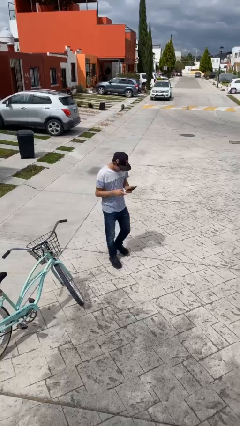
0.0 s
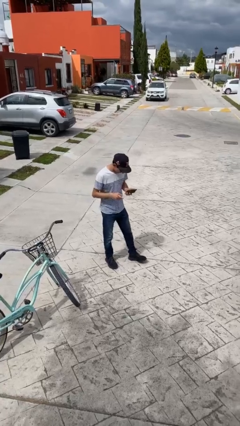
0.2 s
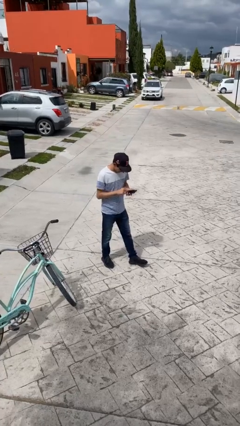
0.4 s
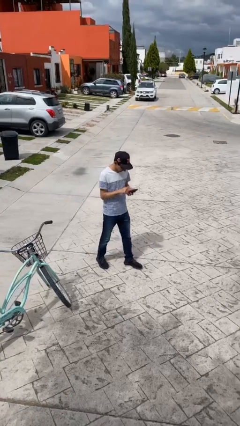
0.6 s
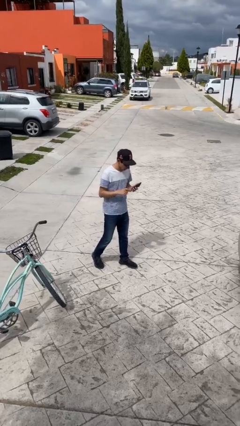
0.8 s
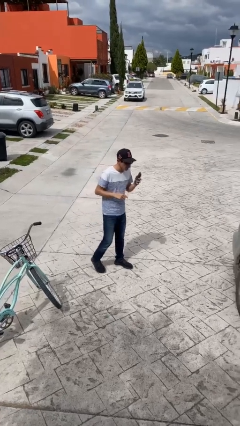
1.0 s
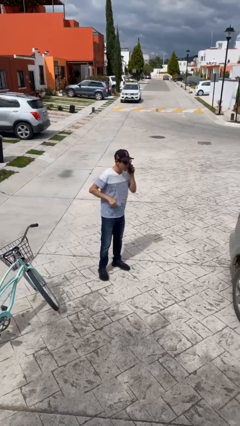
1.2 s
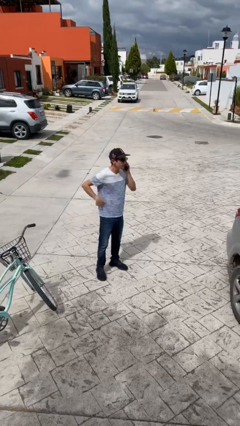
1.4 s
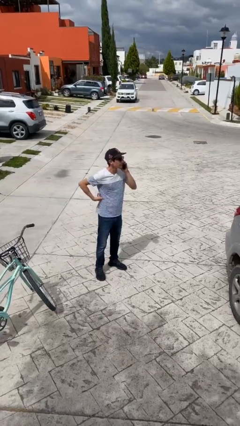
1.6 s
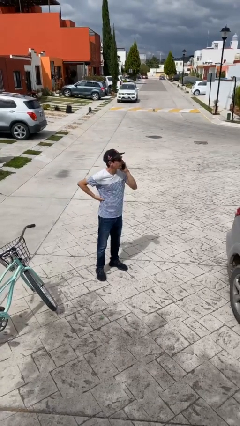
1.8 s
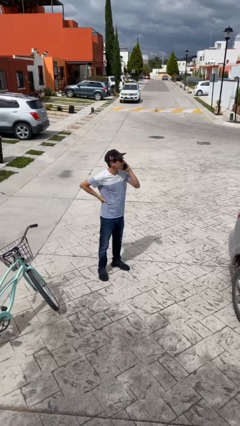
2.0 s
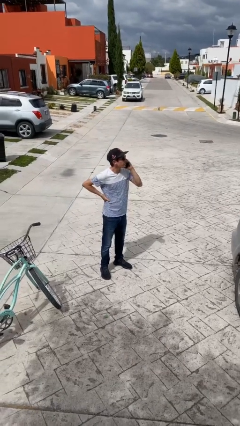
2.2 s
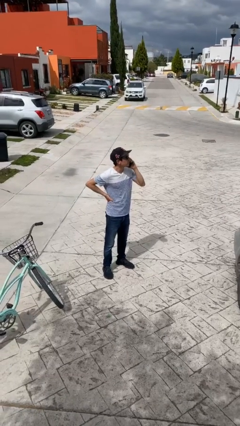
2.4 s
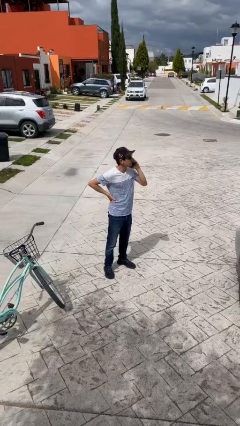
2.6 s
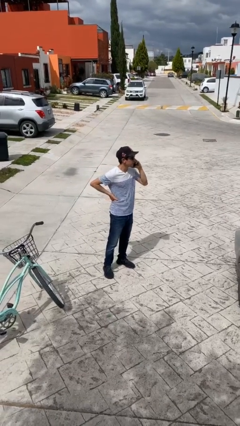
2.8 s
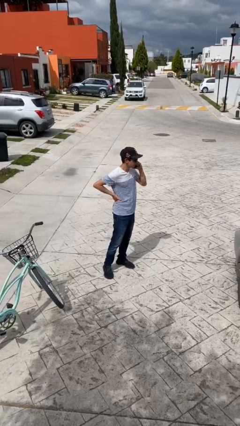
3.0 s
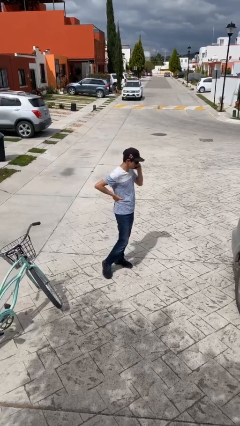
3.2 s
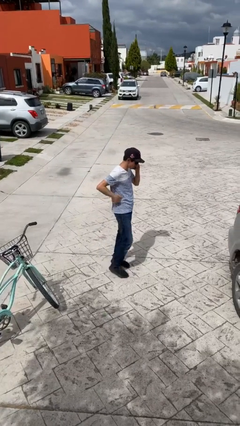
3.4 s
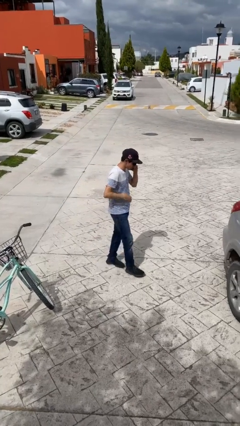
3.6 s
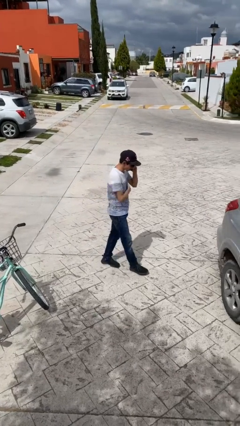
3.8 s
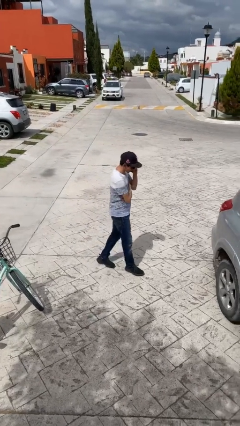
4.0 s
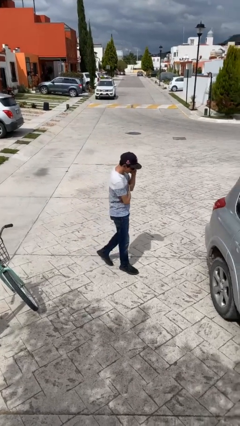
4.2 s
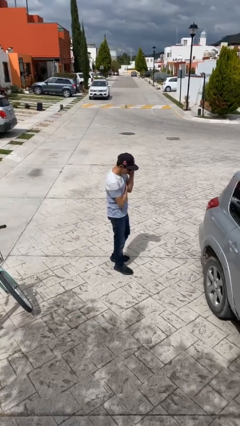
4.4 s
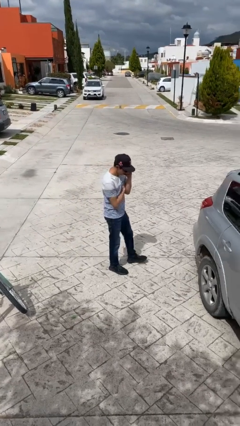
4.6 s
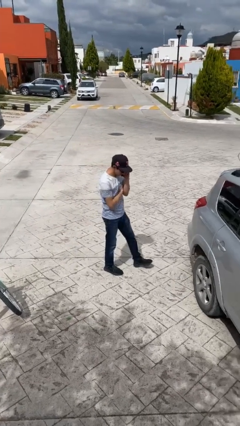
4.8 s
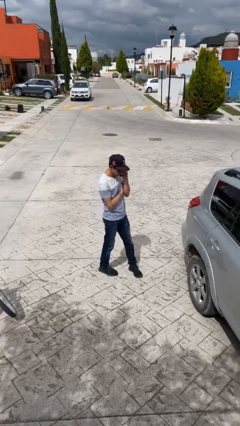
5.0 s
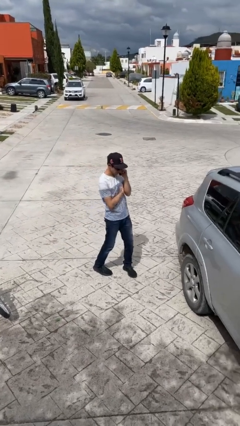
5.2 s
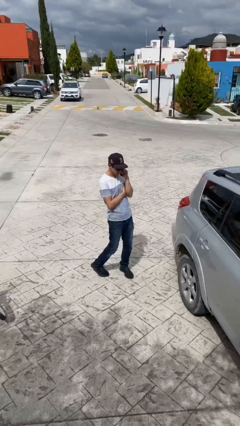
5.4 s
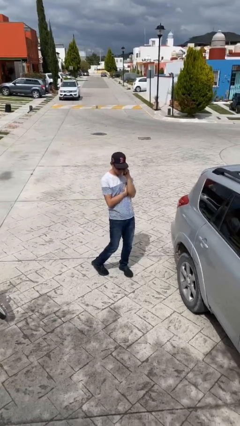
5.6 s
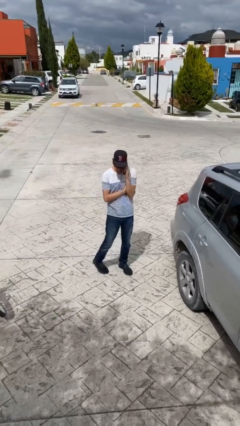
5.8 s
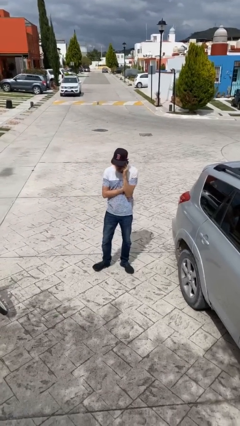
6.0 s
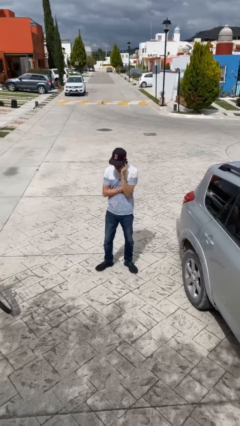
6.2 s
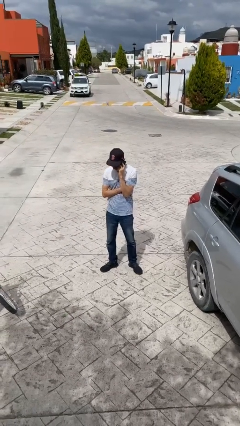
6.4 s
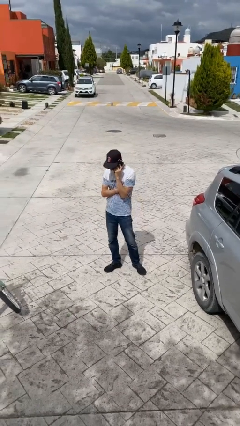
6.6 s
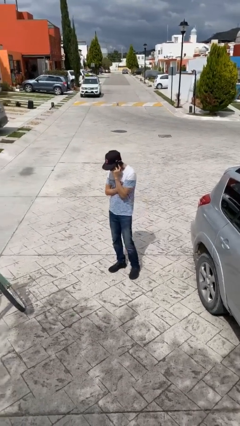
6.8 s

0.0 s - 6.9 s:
person talks on phone

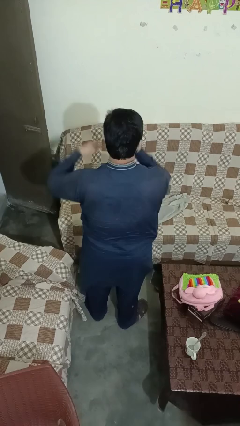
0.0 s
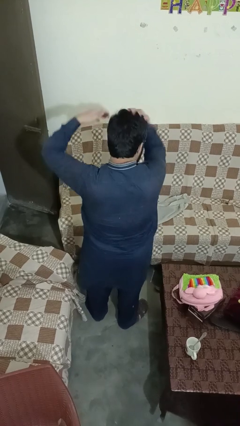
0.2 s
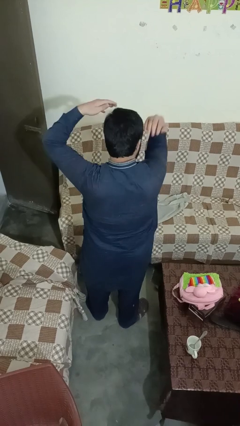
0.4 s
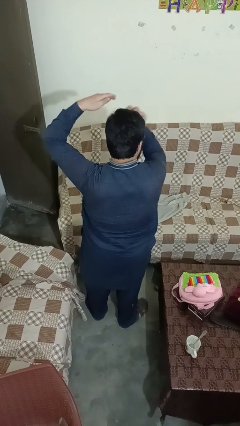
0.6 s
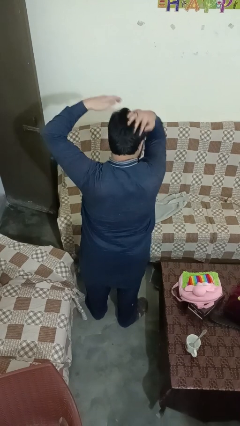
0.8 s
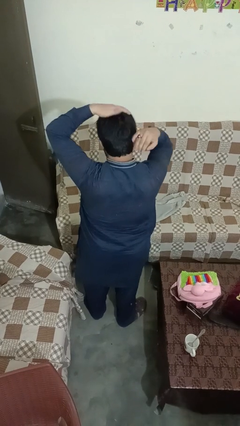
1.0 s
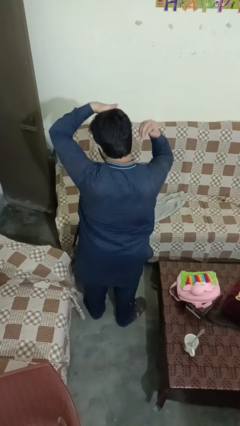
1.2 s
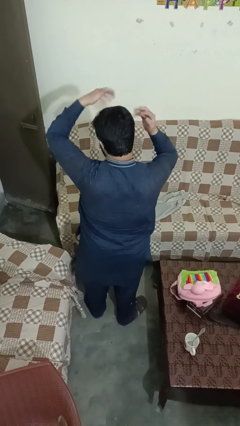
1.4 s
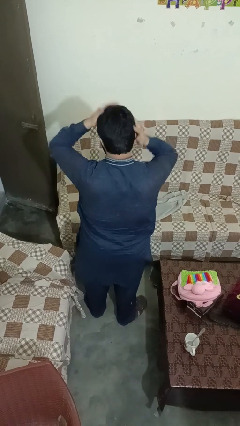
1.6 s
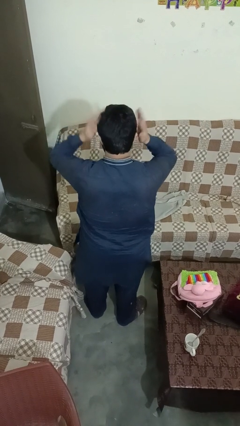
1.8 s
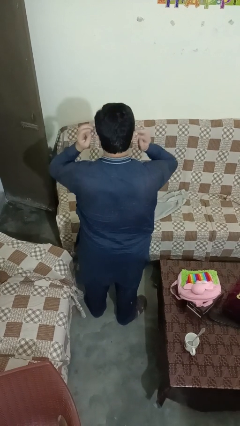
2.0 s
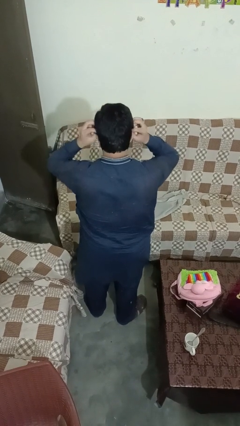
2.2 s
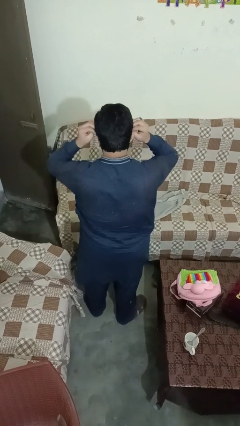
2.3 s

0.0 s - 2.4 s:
person strokes hair

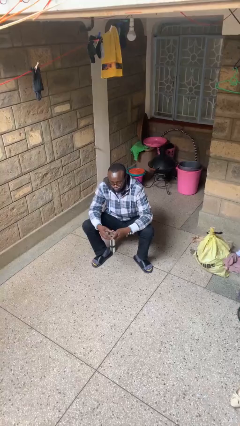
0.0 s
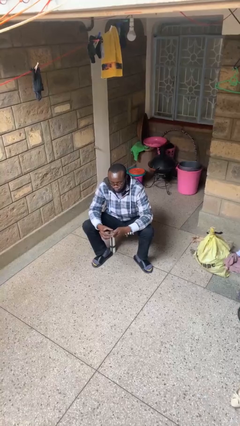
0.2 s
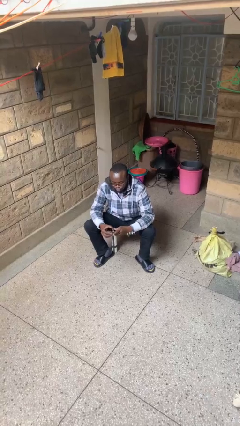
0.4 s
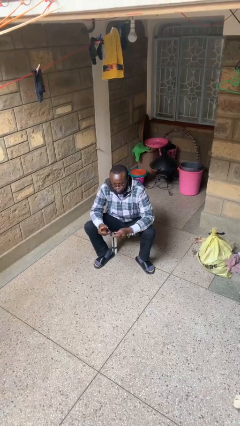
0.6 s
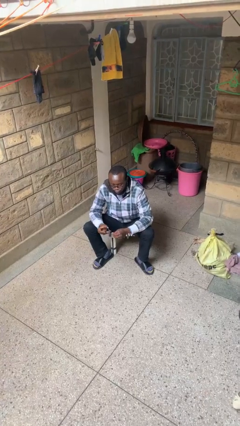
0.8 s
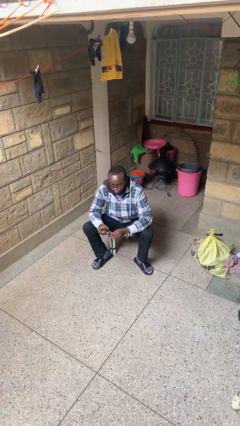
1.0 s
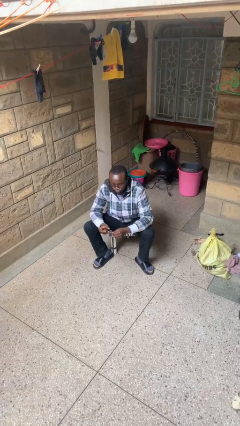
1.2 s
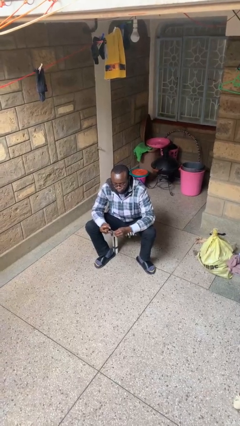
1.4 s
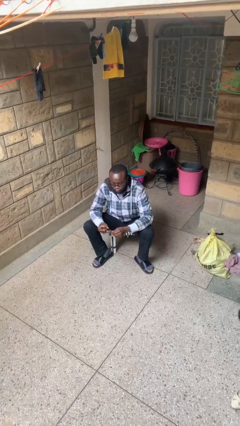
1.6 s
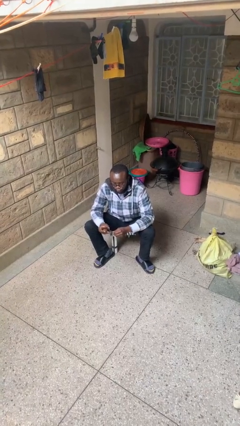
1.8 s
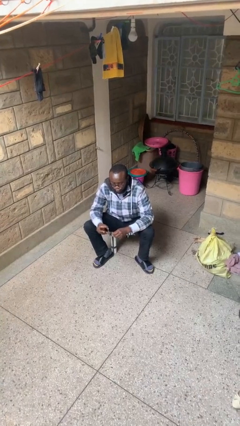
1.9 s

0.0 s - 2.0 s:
person clips fingernails

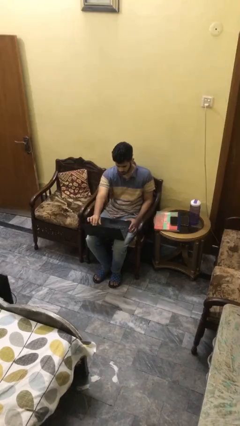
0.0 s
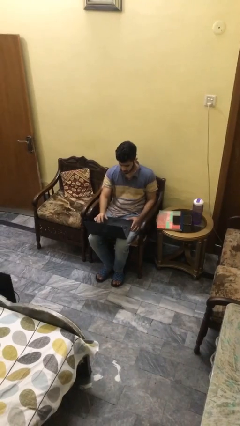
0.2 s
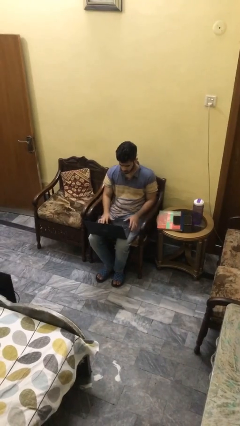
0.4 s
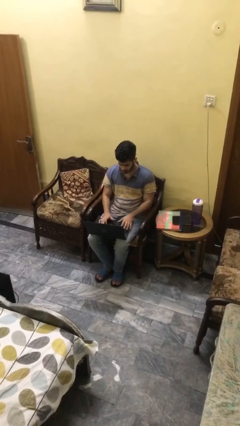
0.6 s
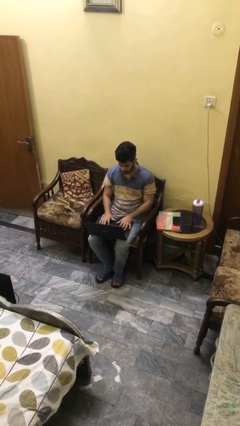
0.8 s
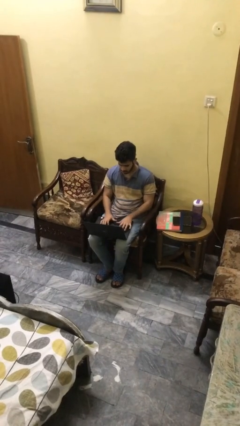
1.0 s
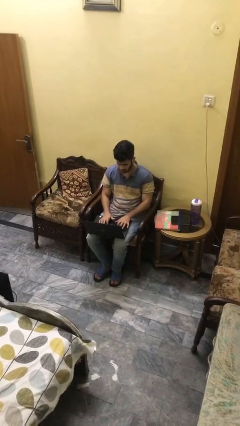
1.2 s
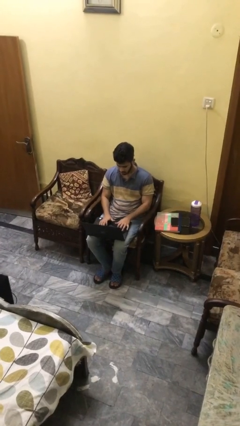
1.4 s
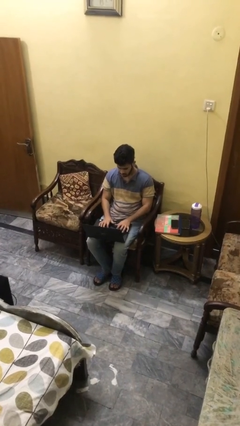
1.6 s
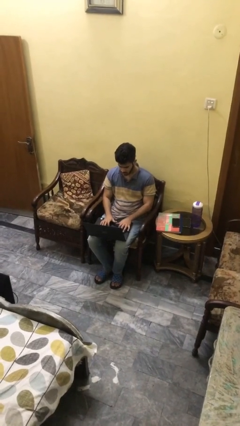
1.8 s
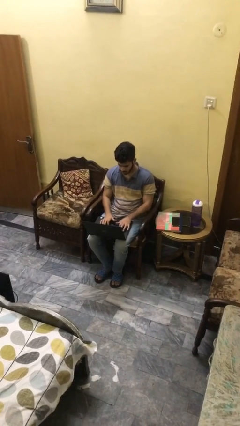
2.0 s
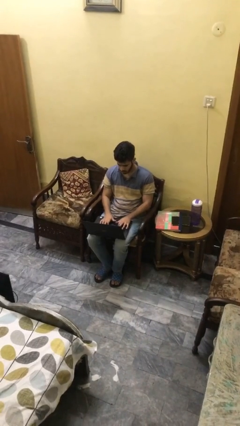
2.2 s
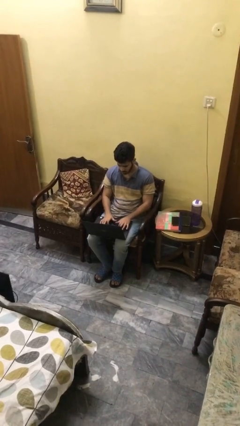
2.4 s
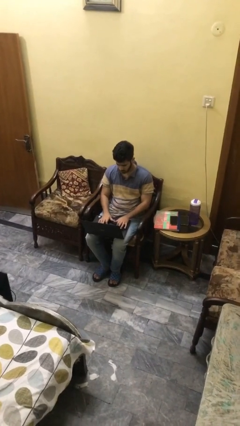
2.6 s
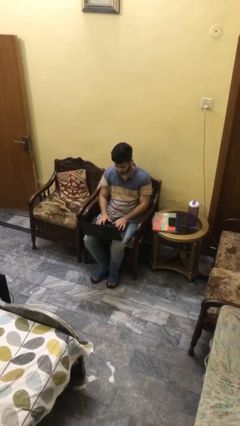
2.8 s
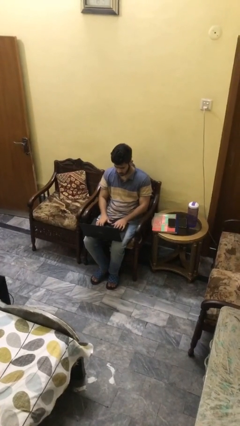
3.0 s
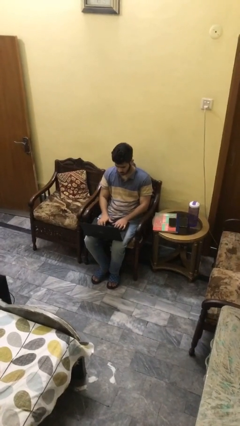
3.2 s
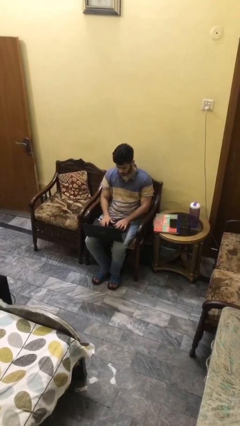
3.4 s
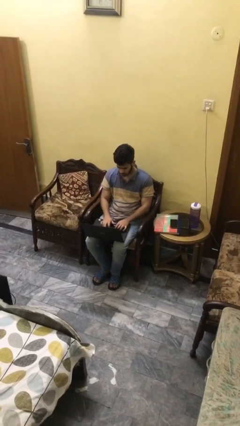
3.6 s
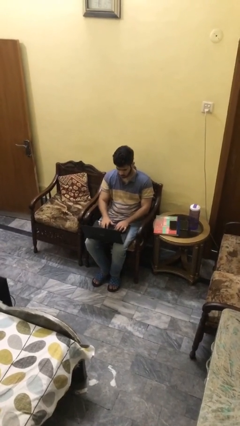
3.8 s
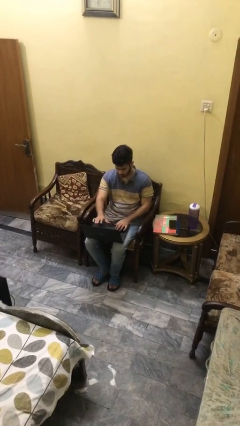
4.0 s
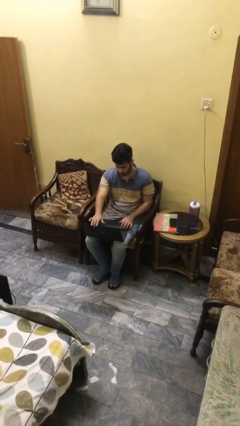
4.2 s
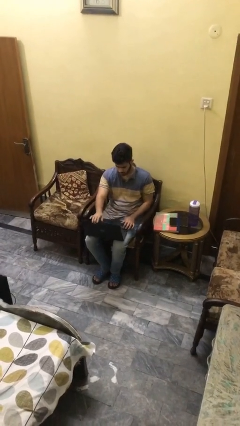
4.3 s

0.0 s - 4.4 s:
person interacts with laptop

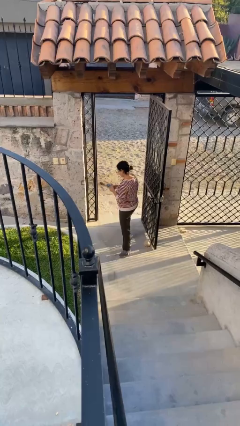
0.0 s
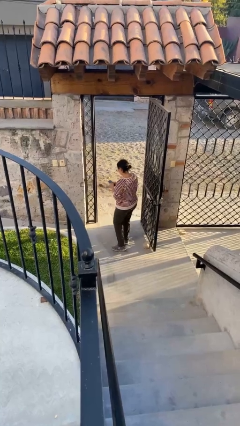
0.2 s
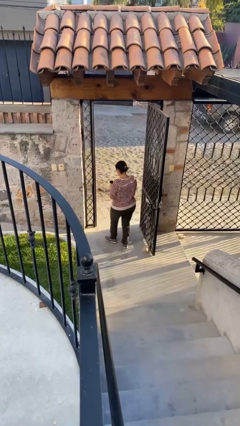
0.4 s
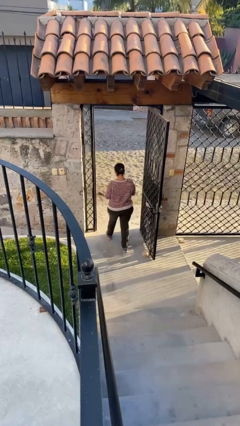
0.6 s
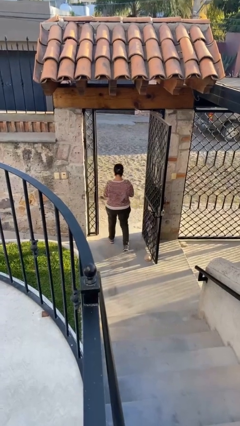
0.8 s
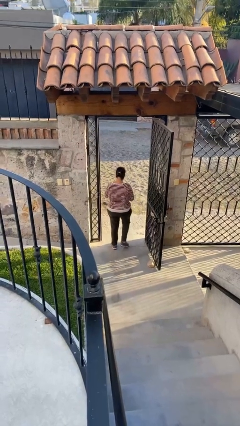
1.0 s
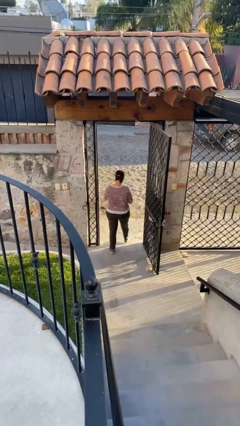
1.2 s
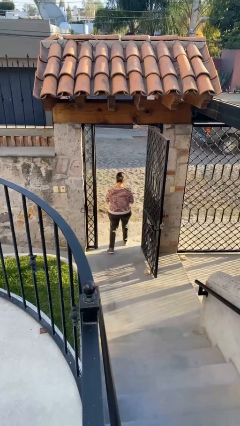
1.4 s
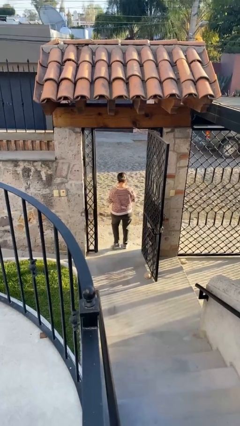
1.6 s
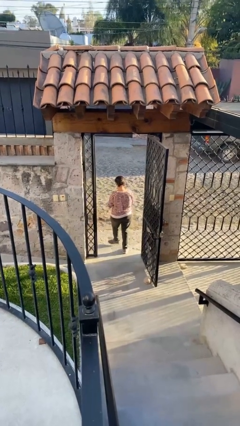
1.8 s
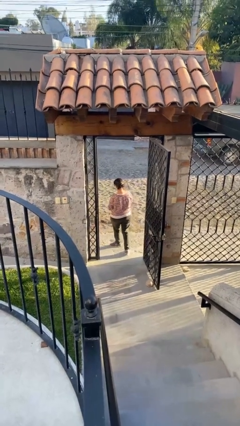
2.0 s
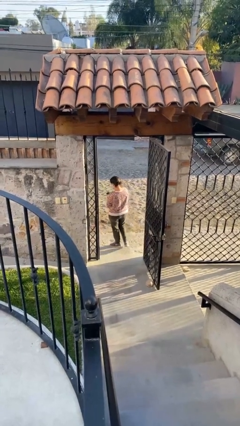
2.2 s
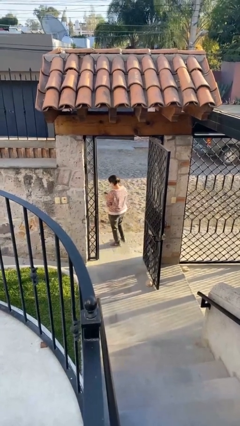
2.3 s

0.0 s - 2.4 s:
person exits scene through structure
